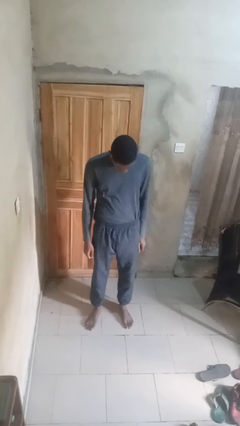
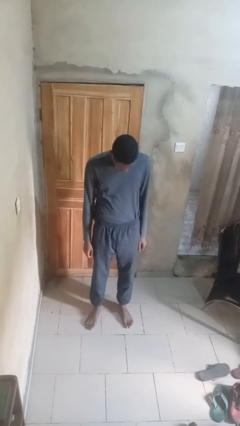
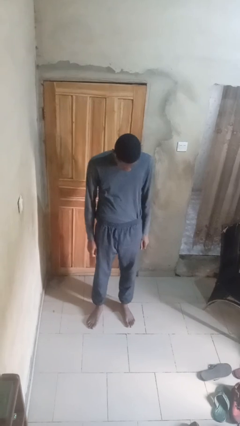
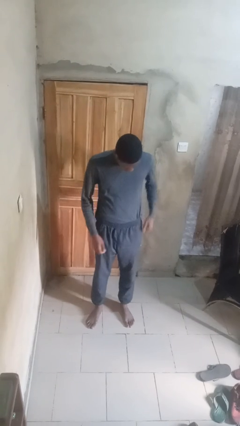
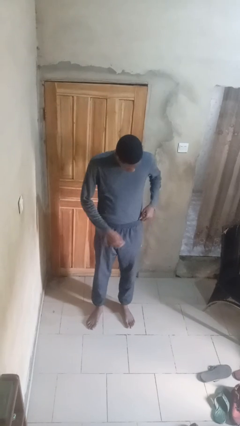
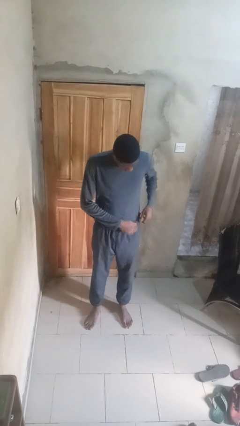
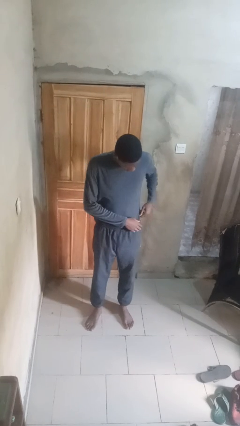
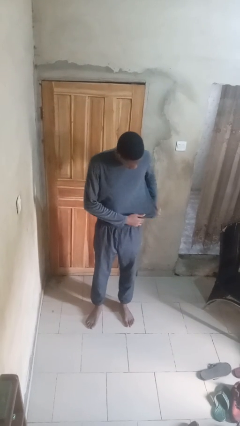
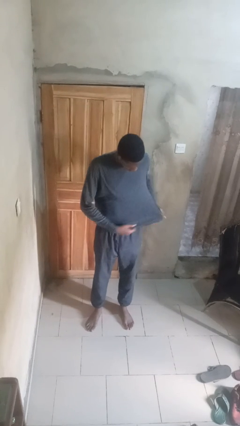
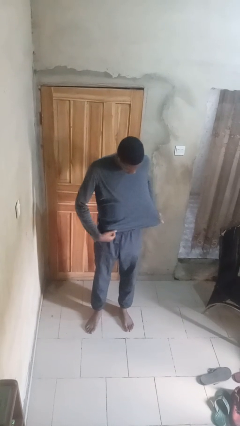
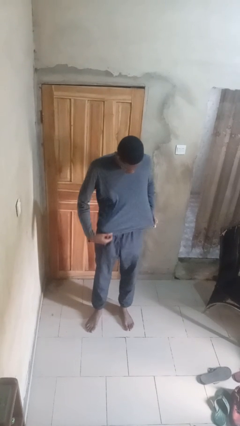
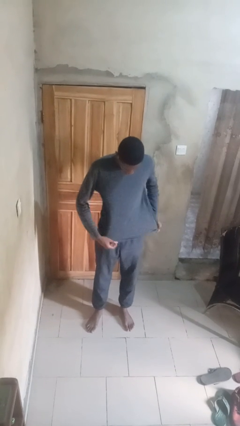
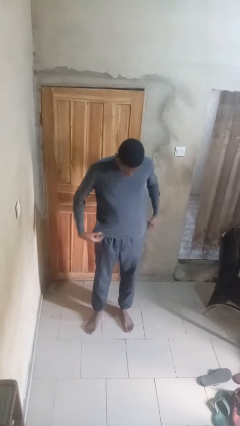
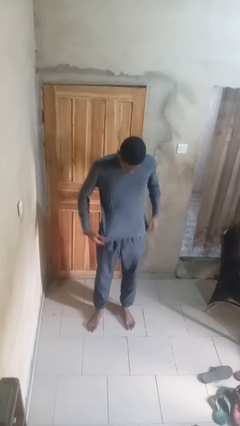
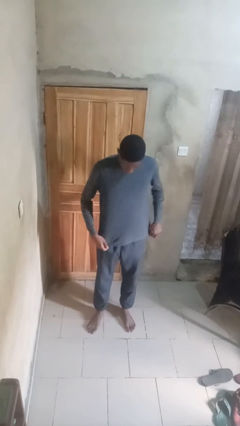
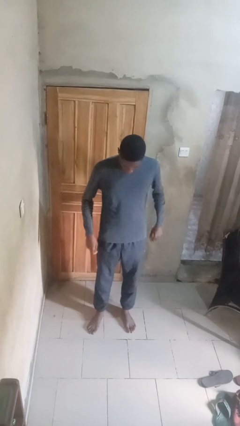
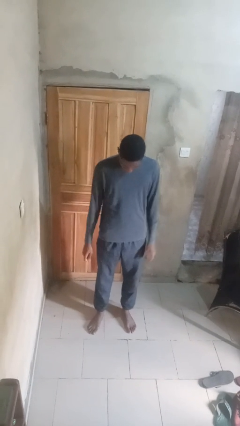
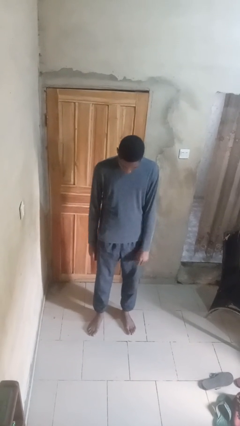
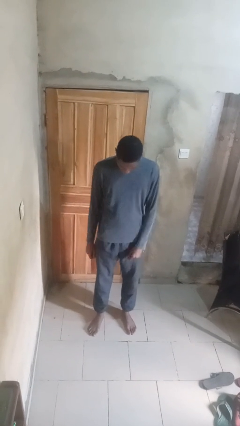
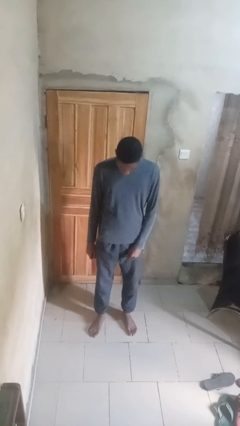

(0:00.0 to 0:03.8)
person untucks shirt

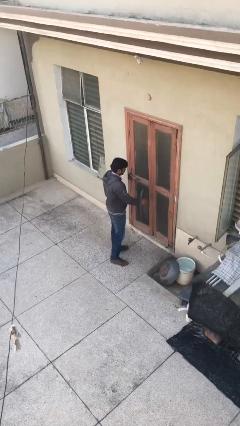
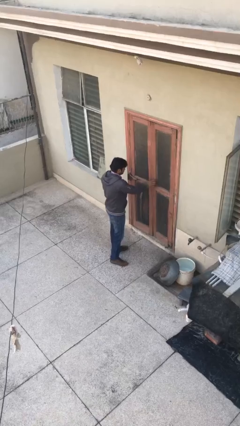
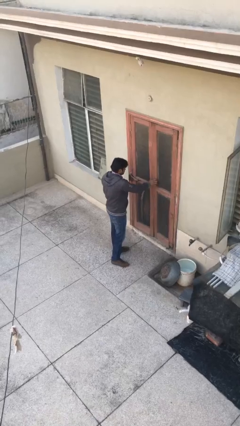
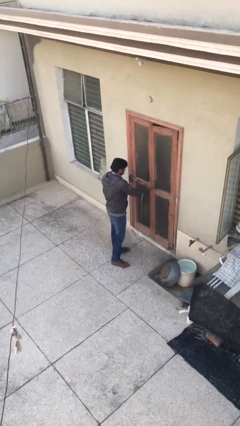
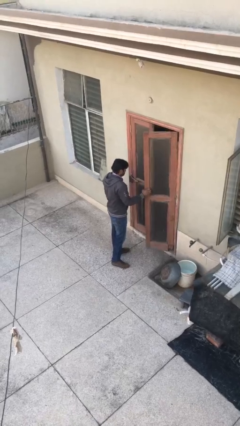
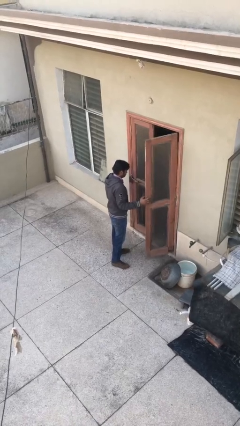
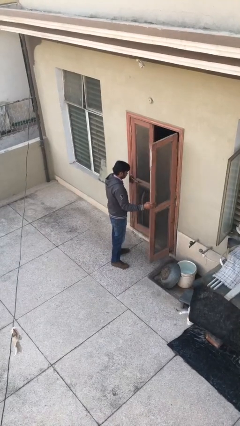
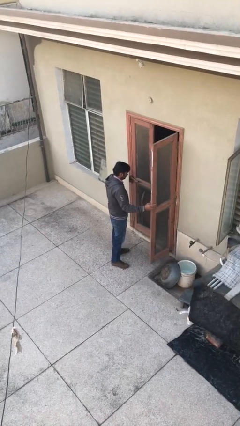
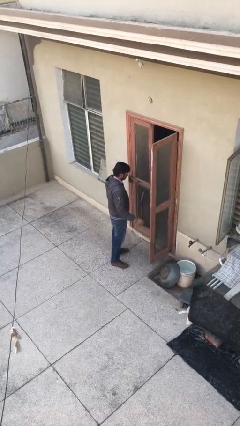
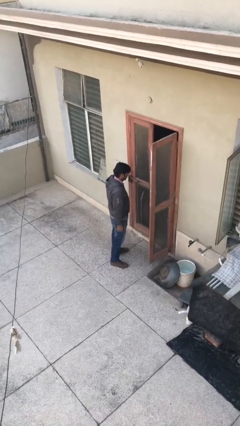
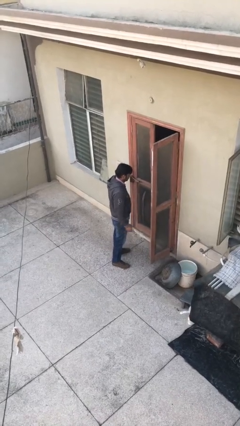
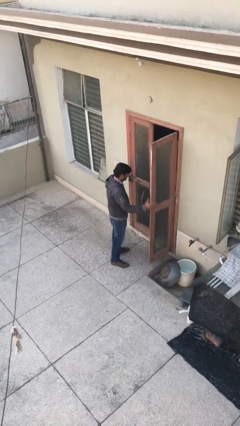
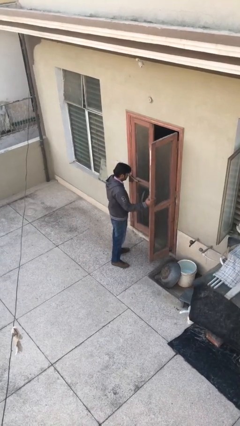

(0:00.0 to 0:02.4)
person opens facility door

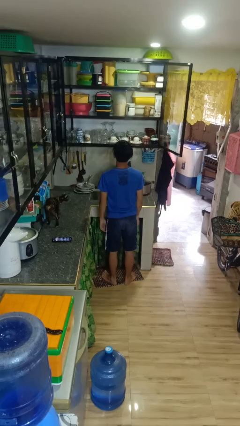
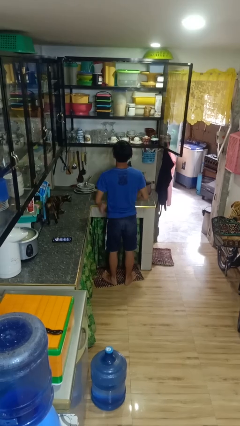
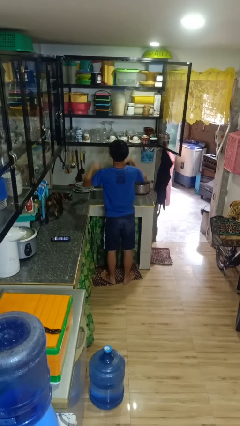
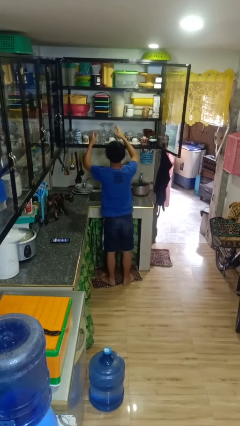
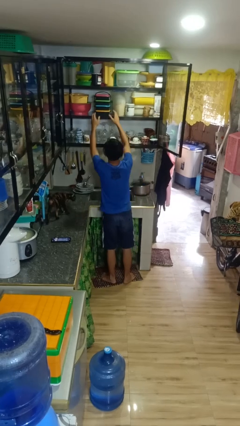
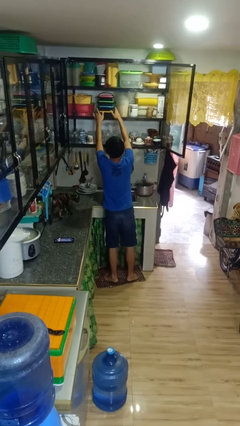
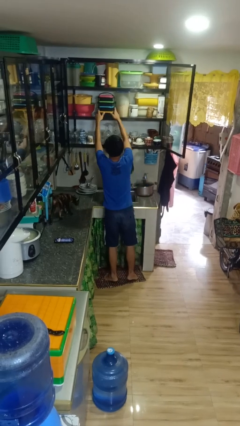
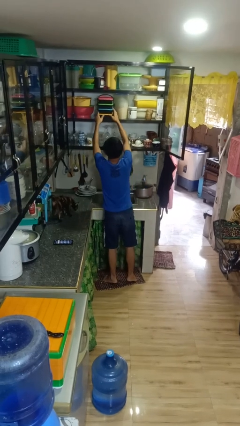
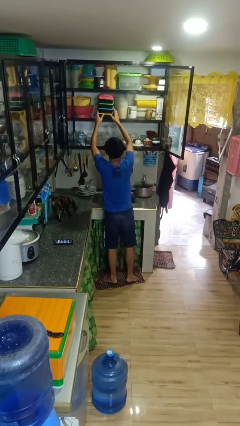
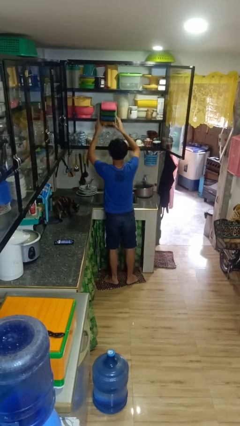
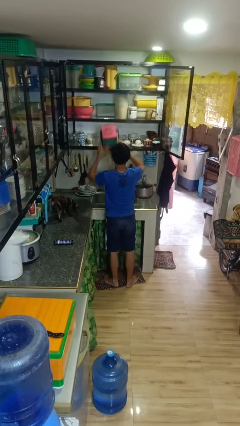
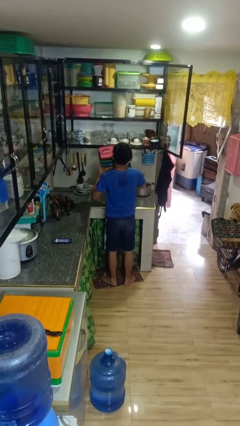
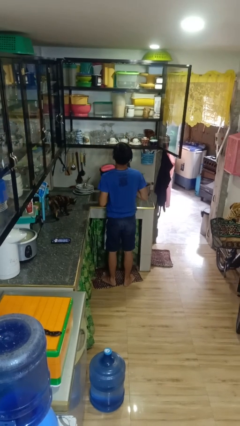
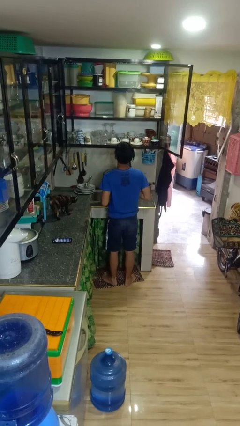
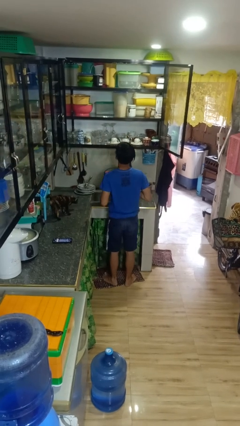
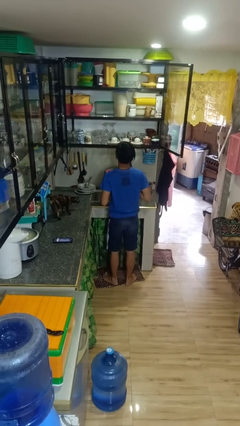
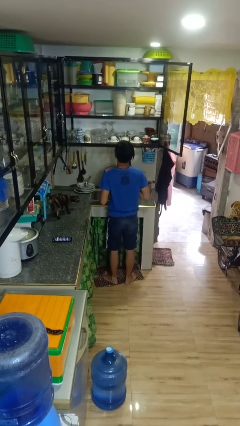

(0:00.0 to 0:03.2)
person picks up object from cabinet

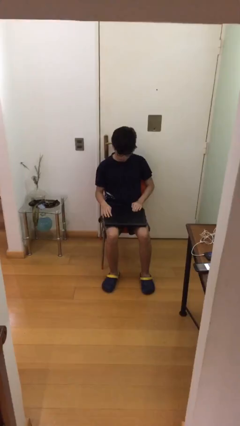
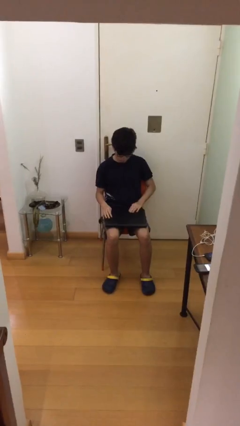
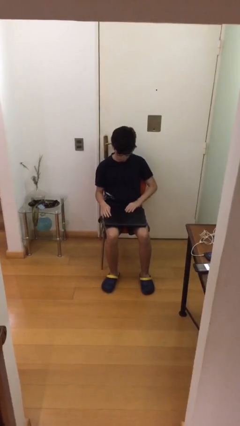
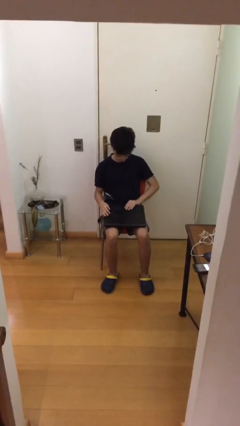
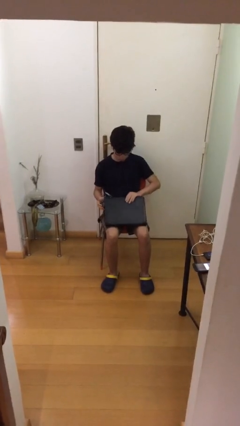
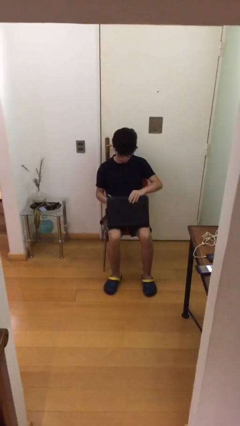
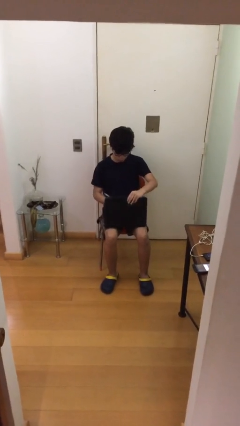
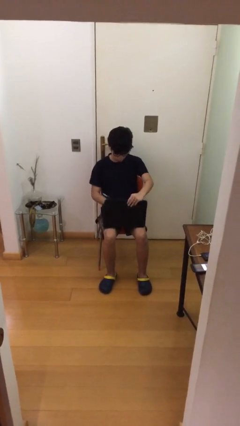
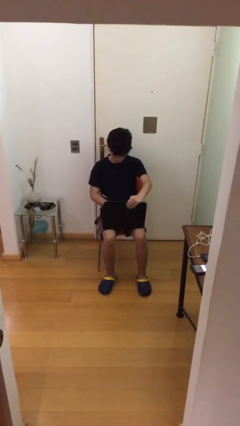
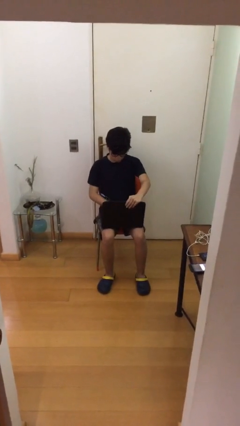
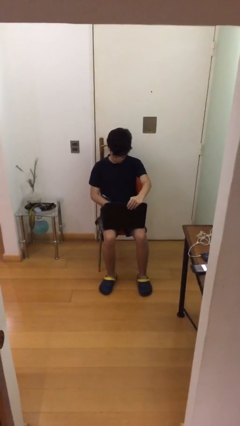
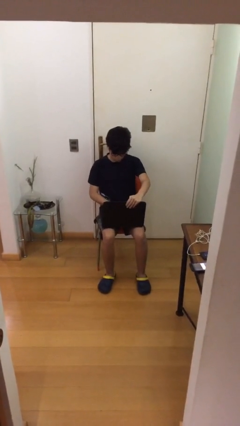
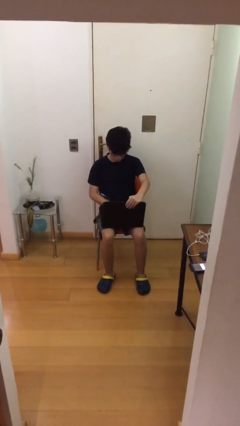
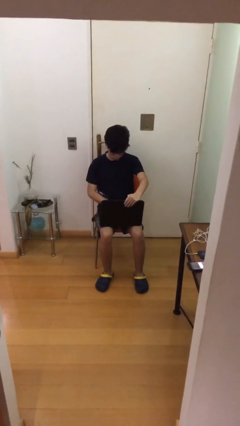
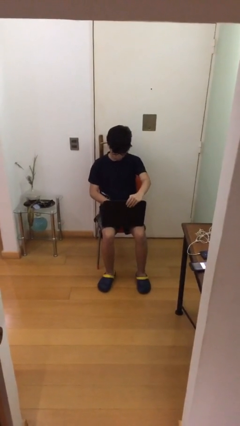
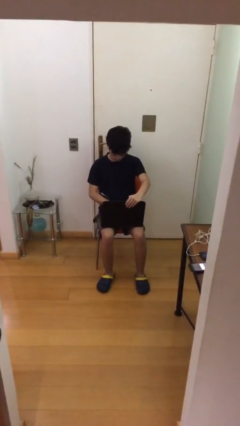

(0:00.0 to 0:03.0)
person interacts with laptop

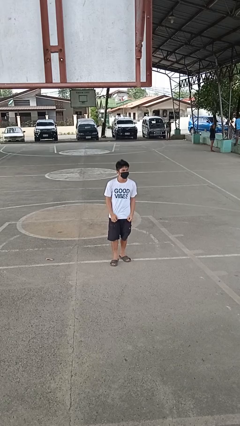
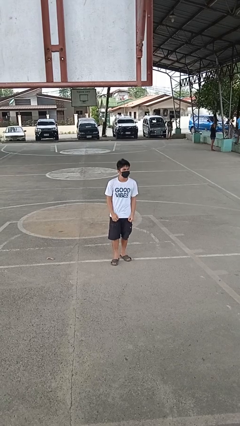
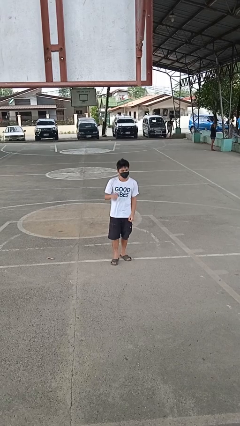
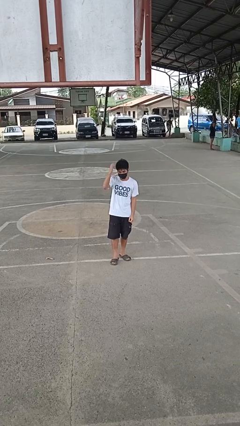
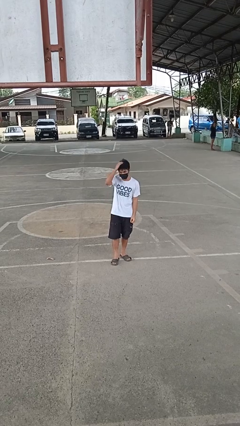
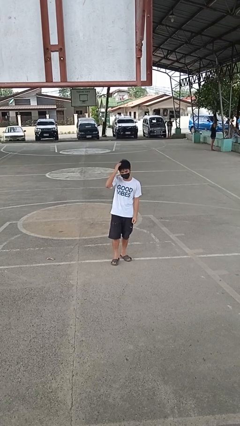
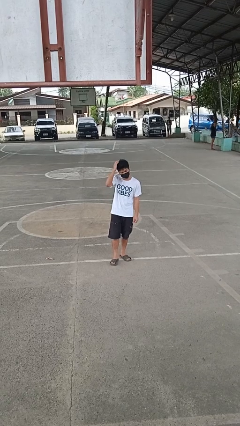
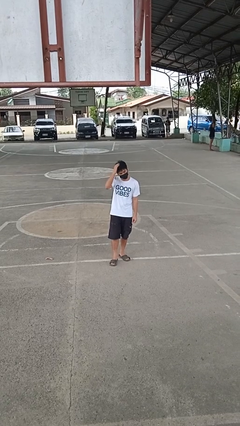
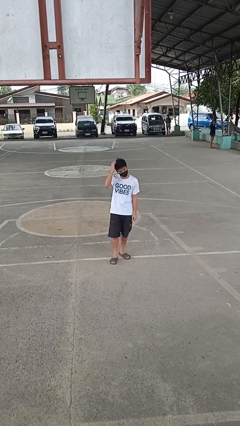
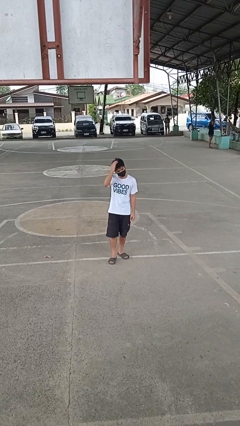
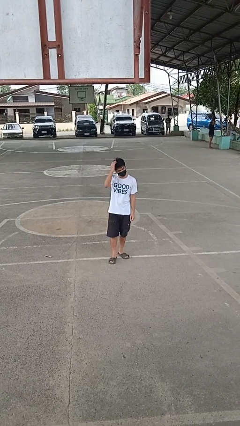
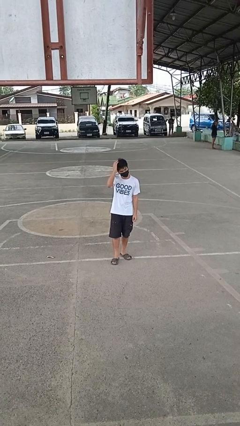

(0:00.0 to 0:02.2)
person pats head

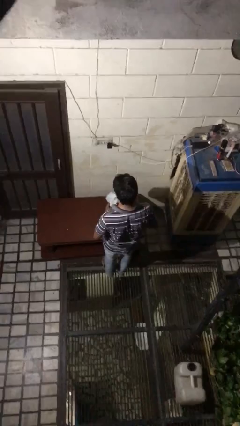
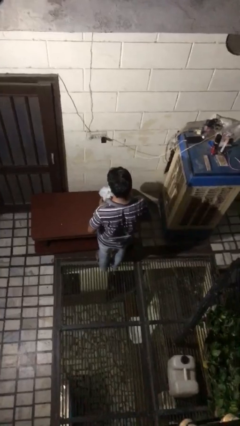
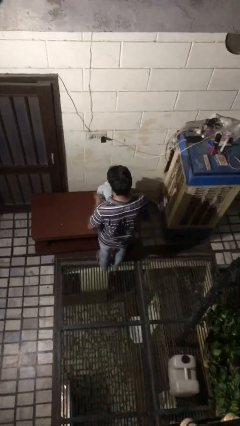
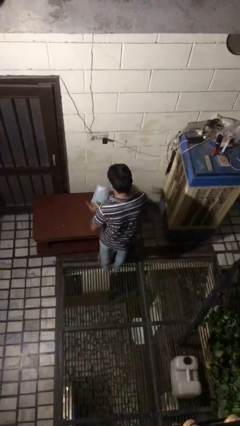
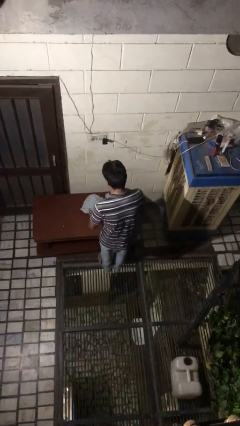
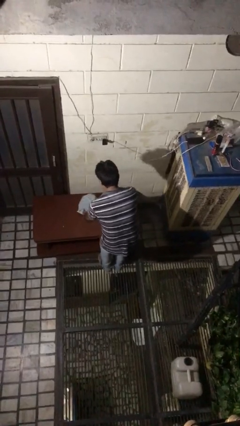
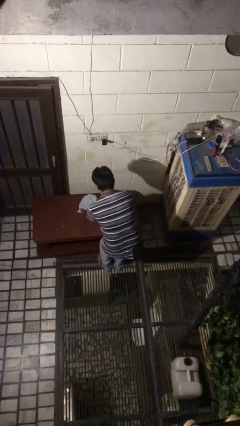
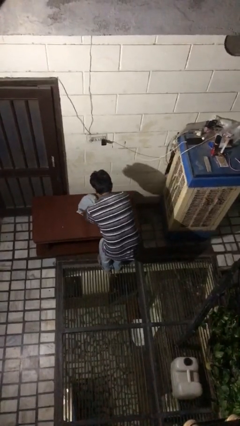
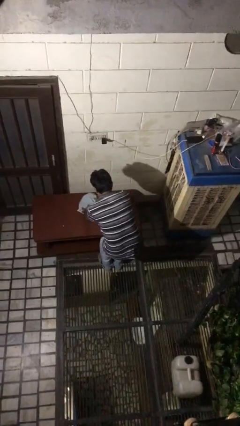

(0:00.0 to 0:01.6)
person throws object on table

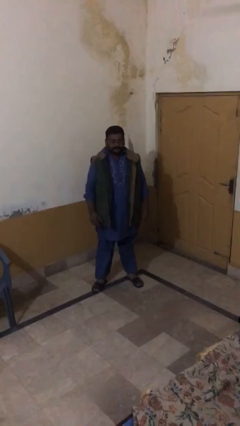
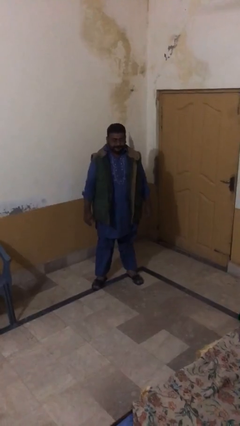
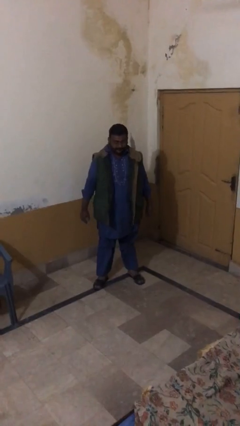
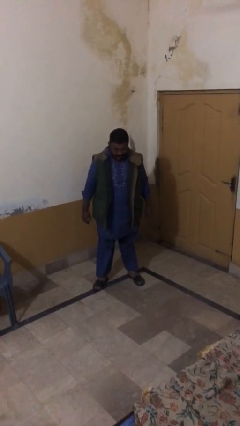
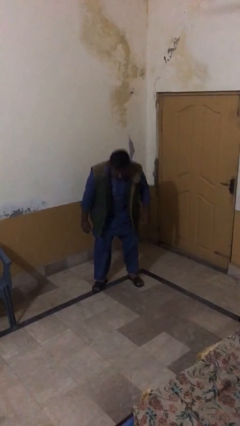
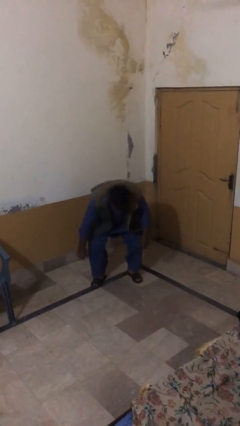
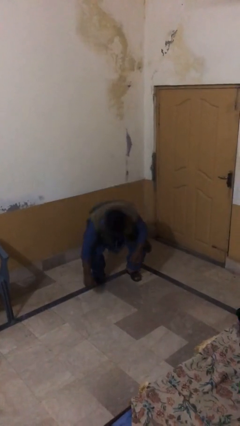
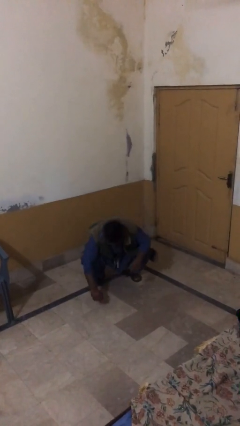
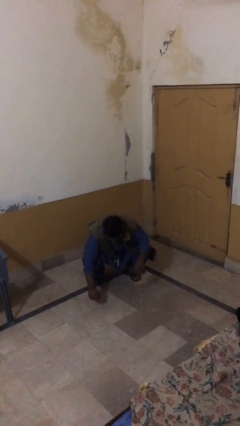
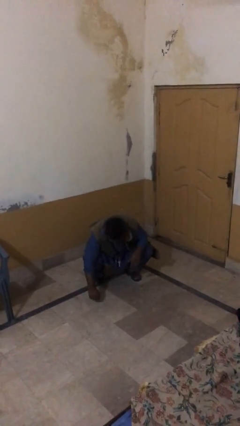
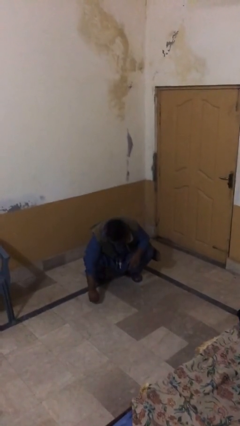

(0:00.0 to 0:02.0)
person sits down
